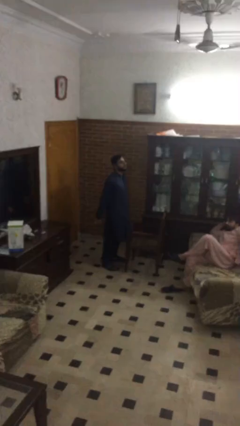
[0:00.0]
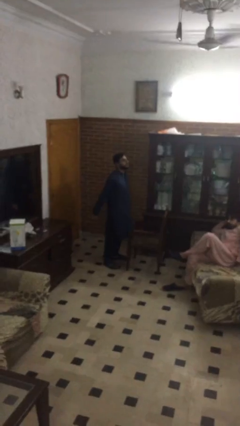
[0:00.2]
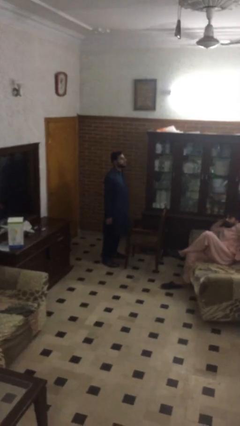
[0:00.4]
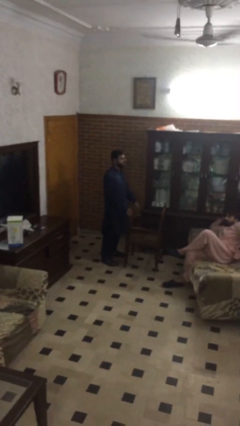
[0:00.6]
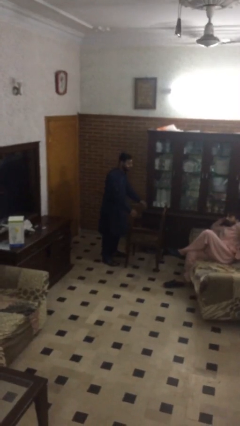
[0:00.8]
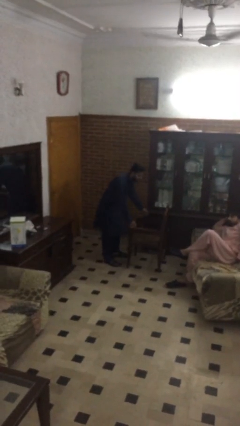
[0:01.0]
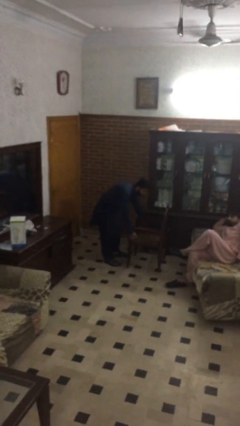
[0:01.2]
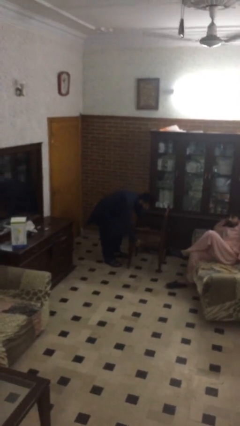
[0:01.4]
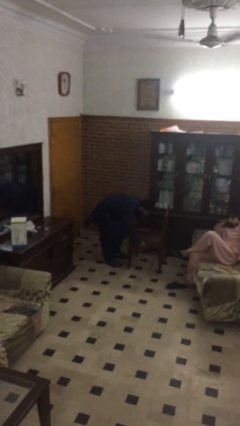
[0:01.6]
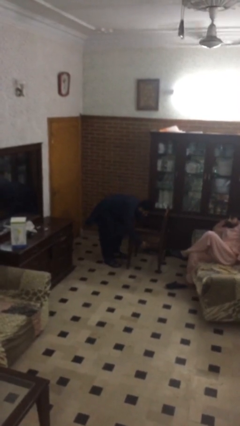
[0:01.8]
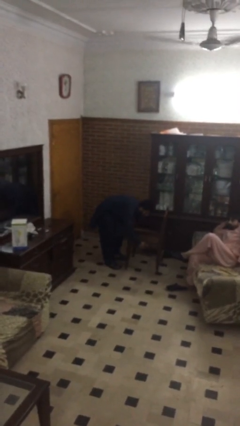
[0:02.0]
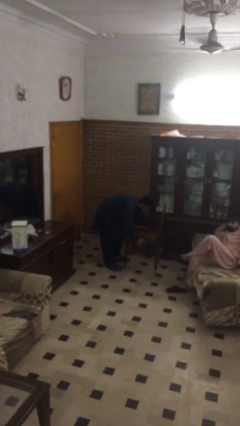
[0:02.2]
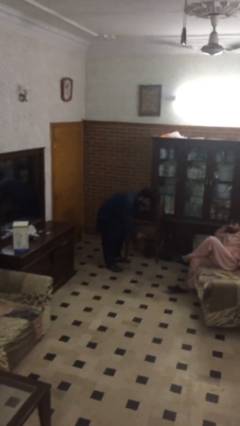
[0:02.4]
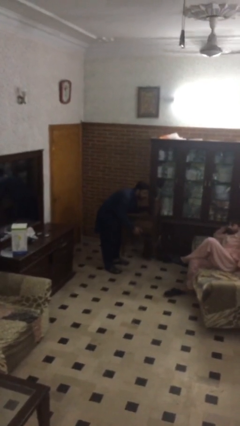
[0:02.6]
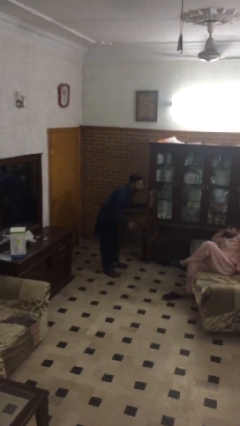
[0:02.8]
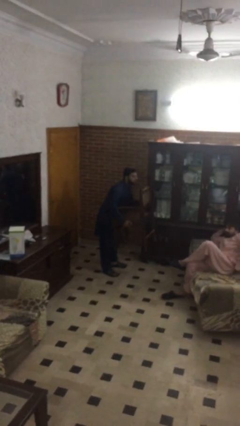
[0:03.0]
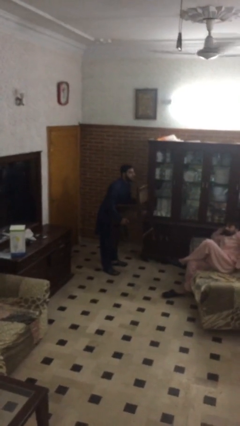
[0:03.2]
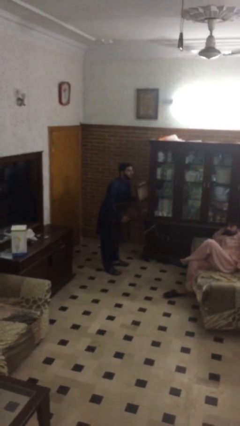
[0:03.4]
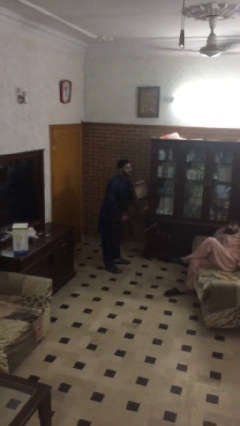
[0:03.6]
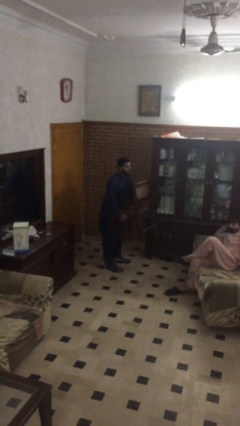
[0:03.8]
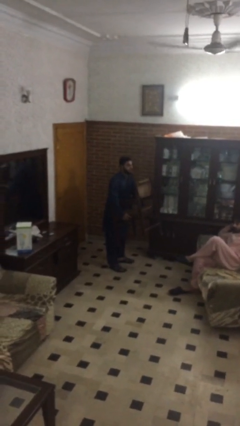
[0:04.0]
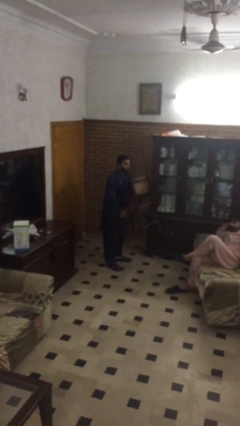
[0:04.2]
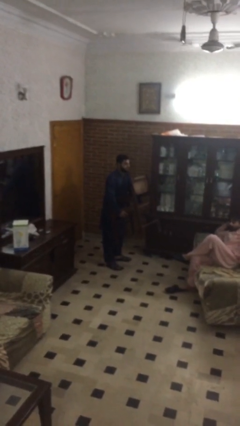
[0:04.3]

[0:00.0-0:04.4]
person picks up object from floor

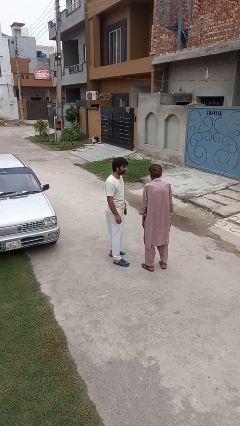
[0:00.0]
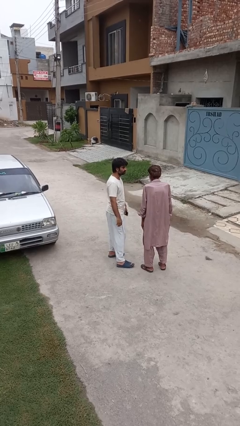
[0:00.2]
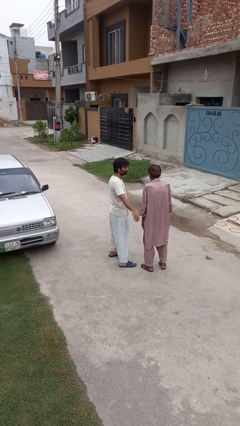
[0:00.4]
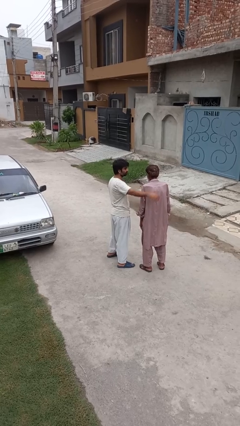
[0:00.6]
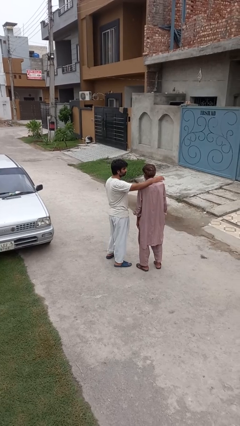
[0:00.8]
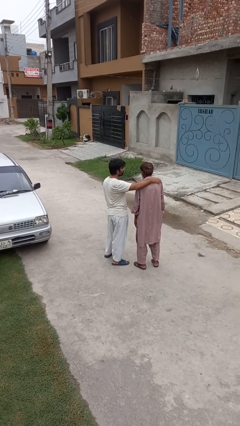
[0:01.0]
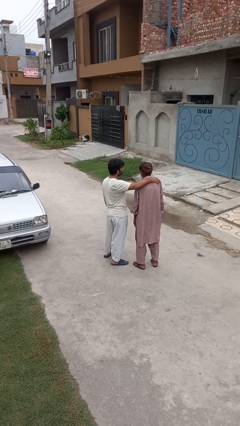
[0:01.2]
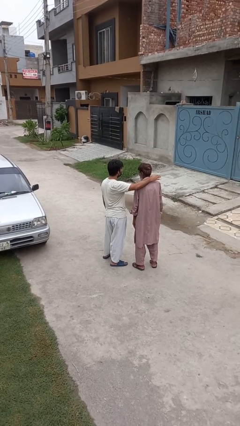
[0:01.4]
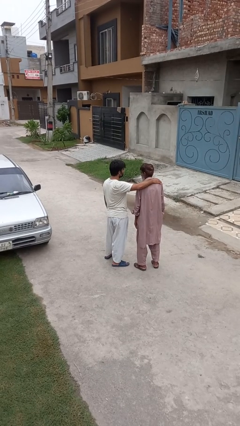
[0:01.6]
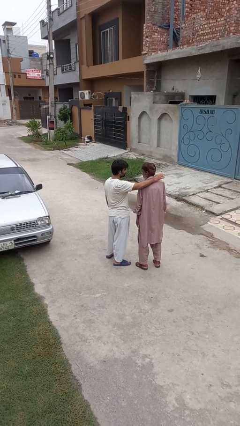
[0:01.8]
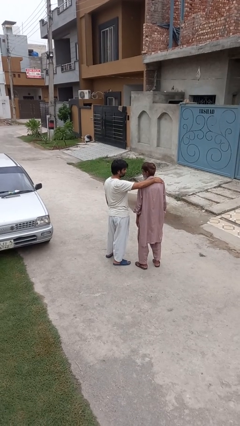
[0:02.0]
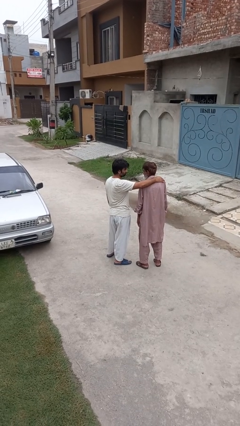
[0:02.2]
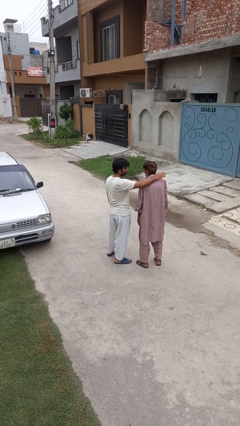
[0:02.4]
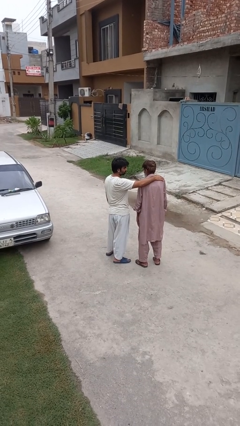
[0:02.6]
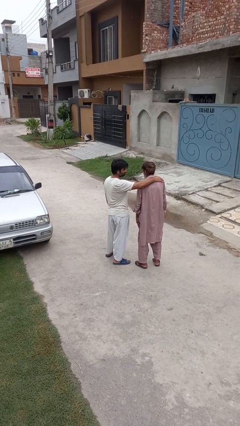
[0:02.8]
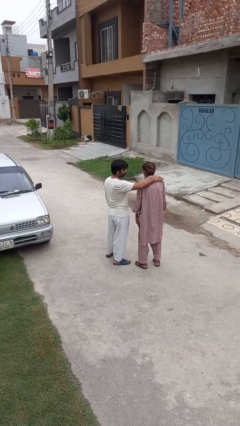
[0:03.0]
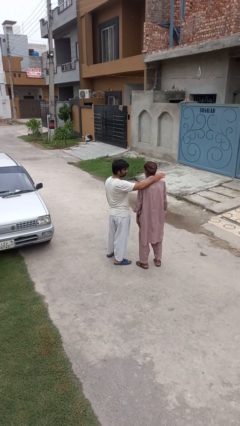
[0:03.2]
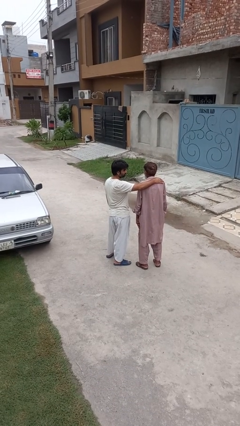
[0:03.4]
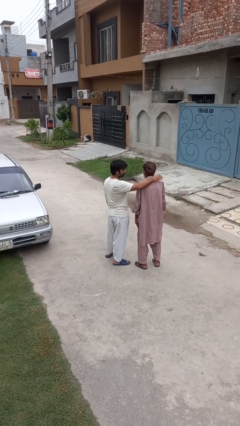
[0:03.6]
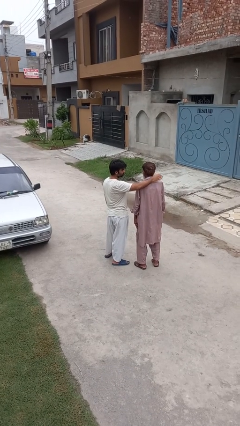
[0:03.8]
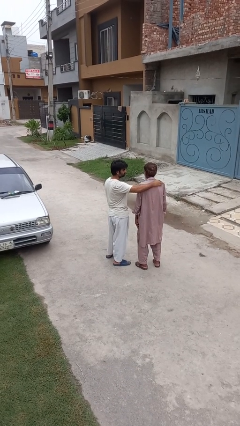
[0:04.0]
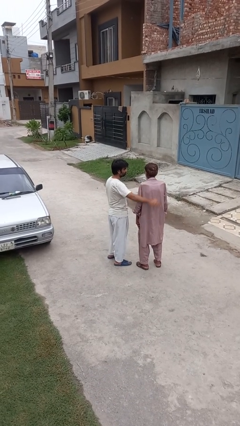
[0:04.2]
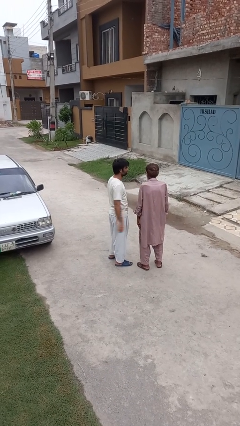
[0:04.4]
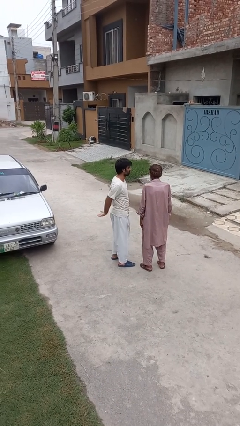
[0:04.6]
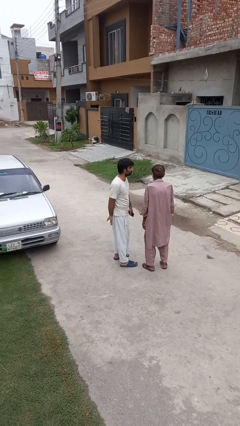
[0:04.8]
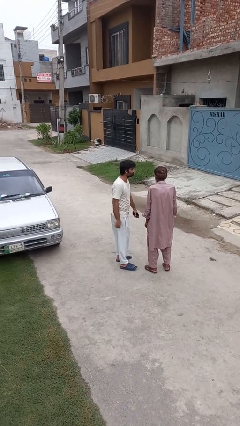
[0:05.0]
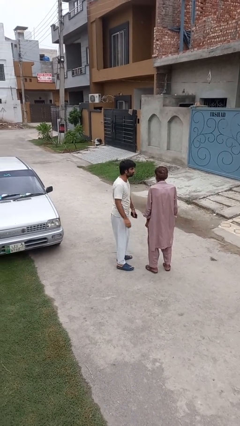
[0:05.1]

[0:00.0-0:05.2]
person pounds shoulders of person

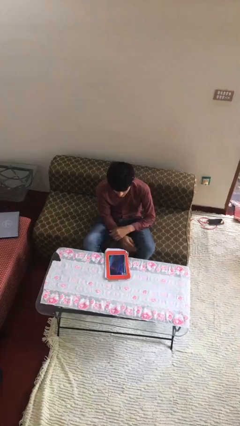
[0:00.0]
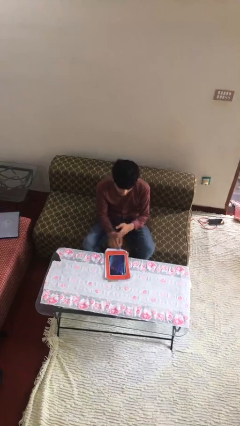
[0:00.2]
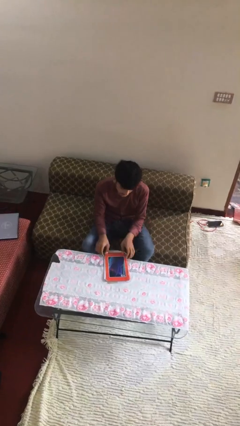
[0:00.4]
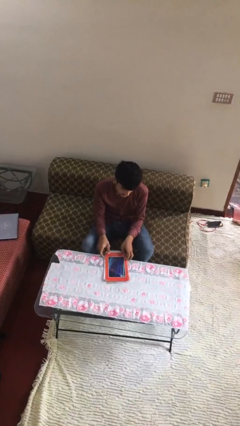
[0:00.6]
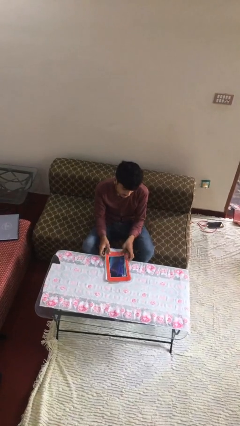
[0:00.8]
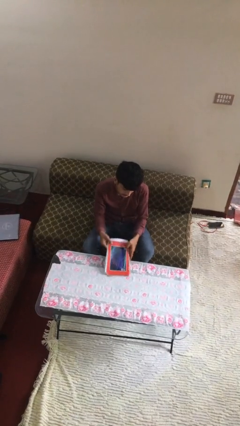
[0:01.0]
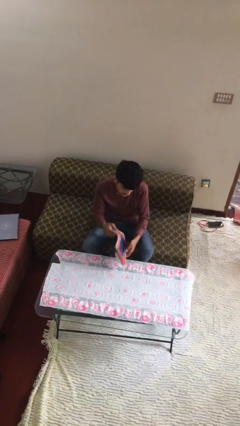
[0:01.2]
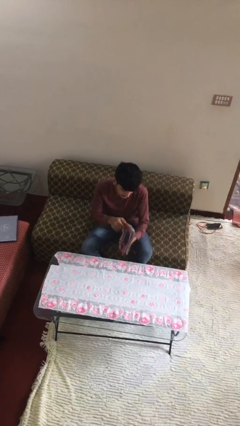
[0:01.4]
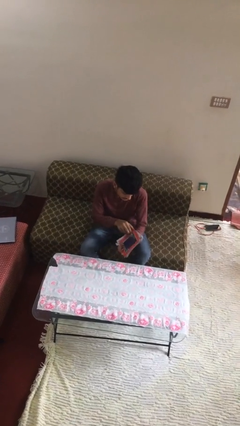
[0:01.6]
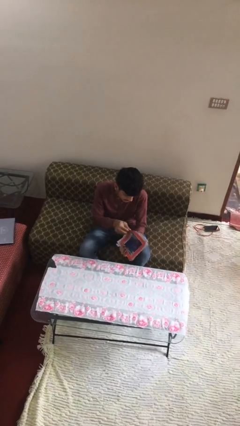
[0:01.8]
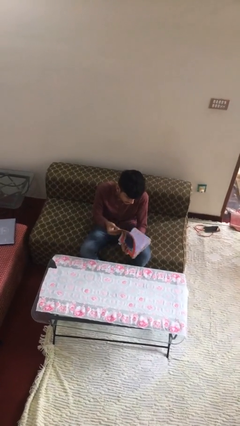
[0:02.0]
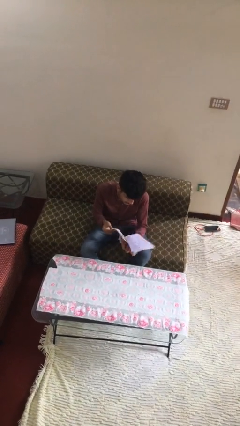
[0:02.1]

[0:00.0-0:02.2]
person picks up object from table

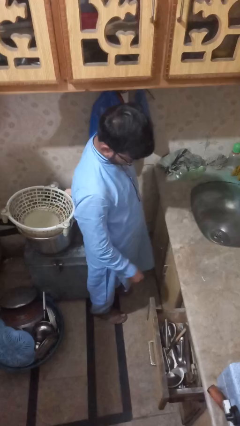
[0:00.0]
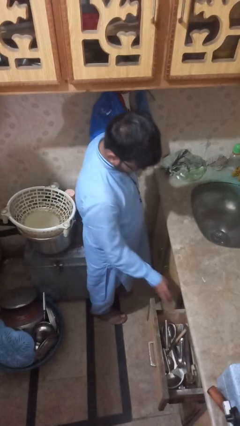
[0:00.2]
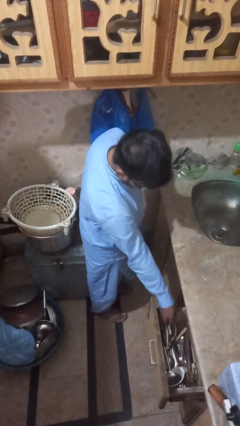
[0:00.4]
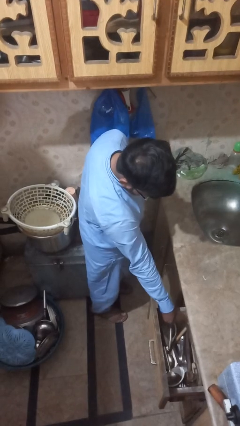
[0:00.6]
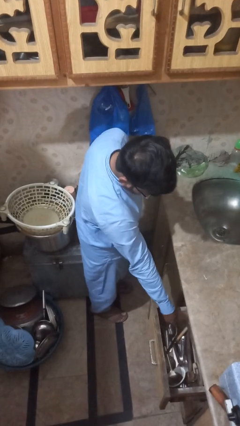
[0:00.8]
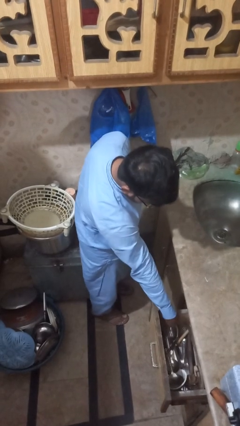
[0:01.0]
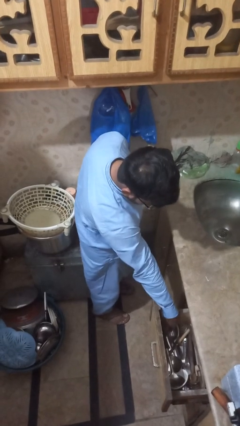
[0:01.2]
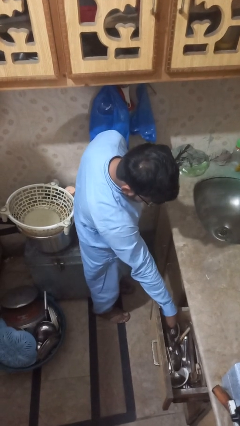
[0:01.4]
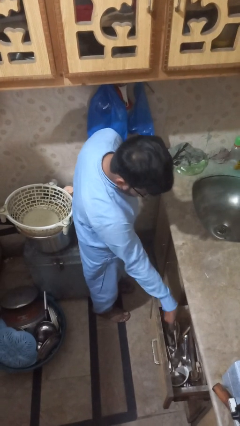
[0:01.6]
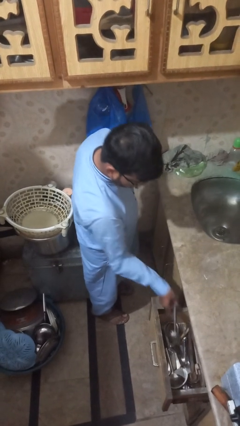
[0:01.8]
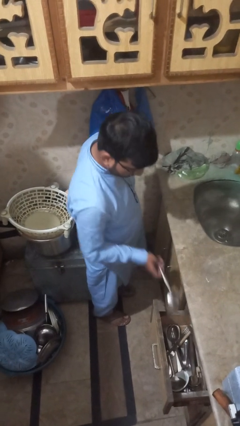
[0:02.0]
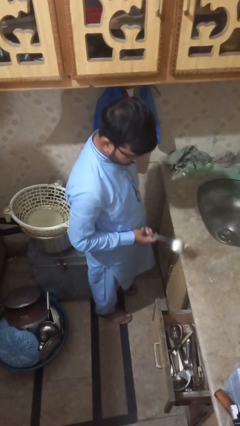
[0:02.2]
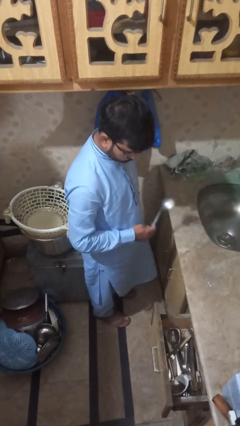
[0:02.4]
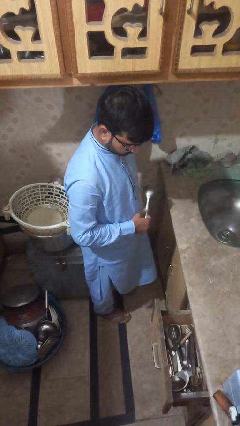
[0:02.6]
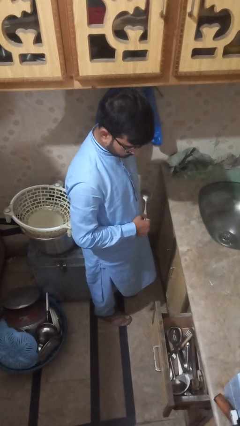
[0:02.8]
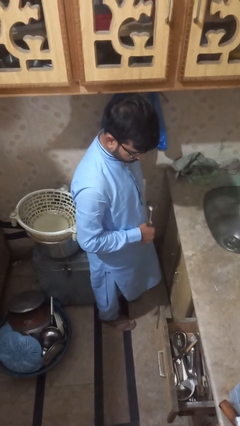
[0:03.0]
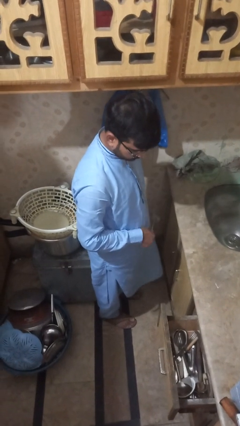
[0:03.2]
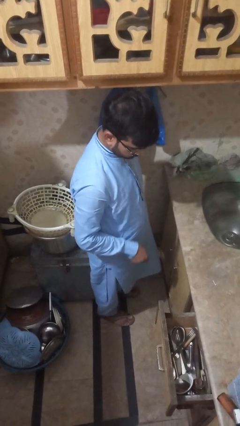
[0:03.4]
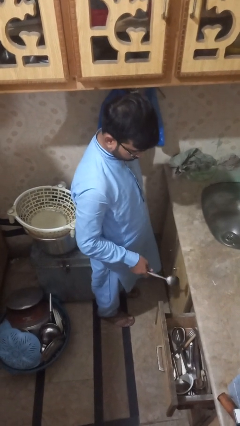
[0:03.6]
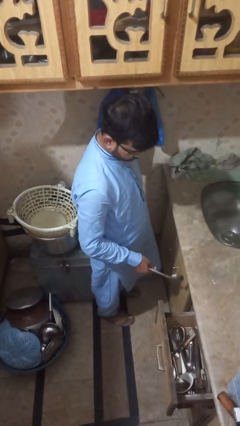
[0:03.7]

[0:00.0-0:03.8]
person takes object from kitchen drawer

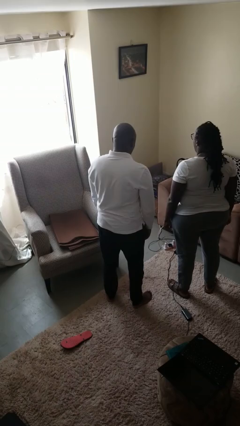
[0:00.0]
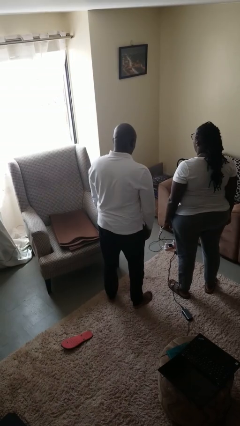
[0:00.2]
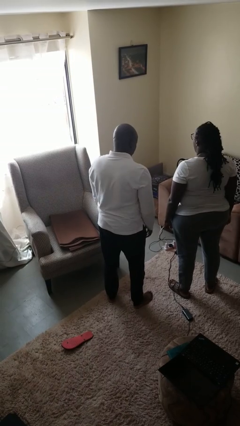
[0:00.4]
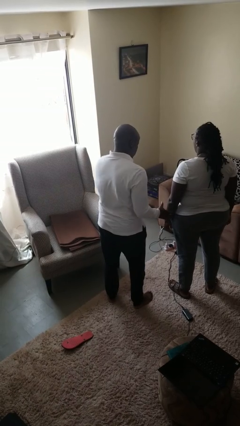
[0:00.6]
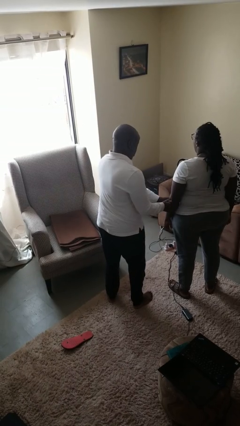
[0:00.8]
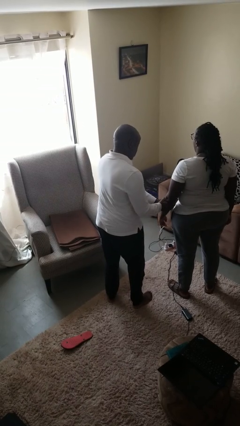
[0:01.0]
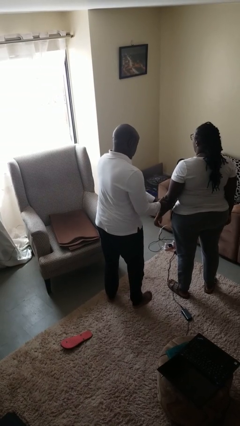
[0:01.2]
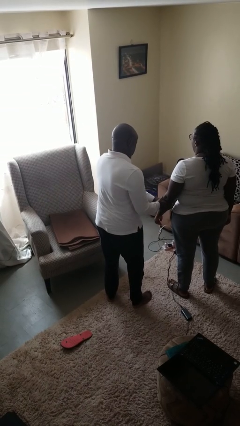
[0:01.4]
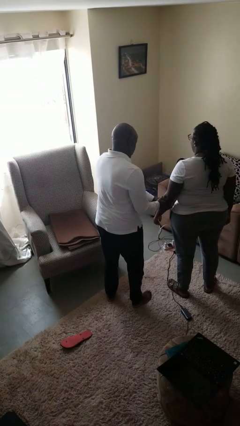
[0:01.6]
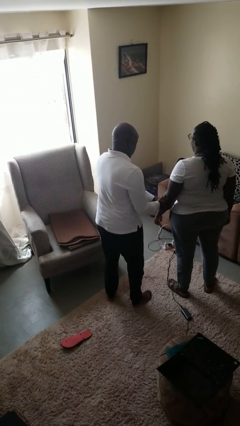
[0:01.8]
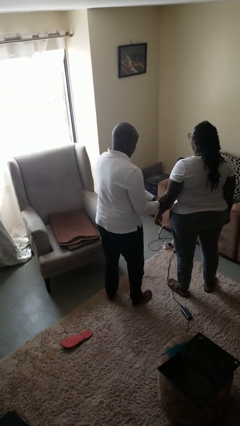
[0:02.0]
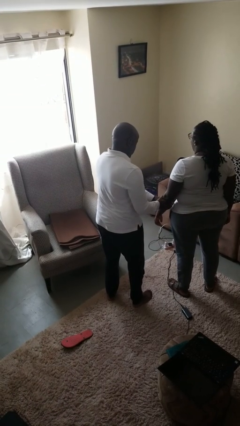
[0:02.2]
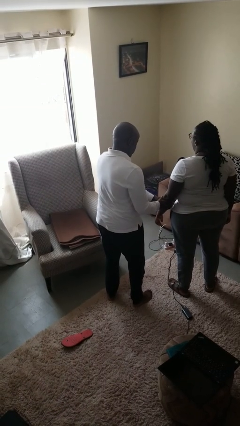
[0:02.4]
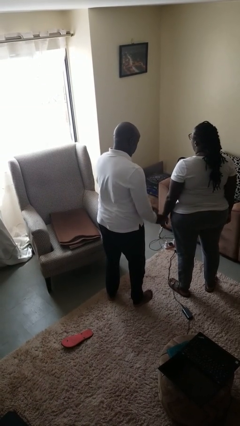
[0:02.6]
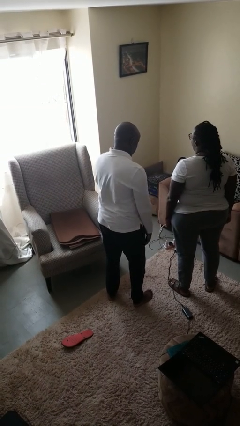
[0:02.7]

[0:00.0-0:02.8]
person grabs person by forearm
